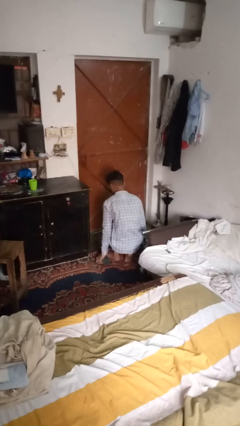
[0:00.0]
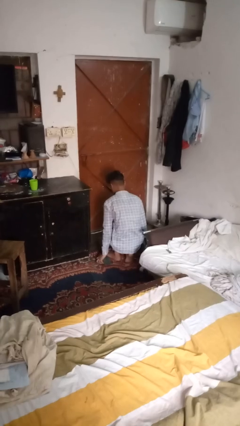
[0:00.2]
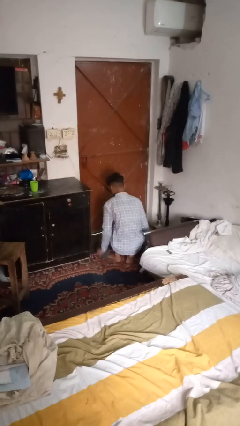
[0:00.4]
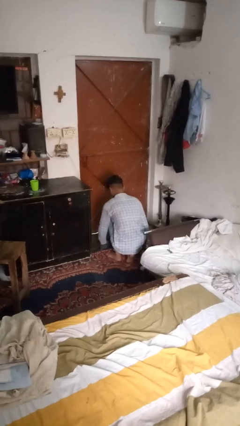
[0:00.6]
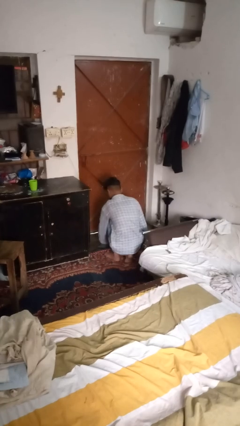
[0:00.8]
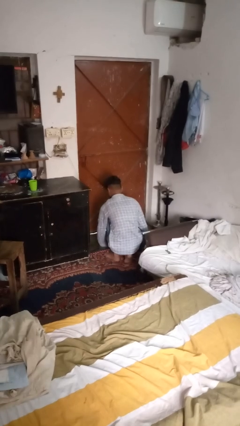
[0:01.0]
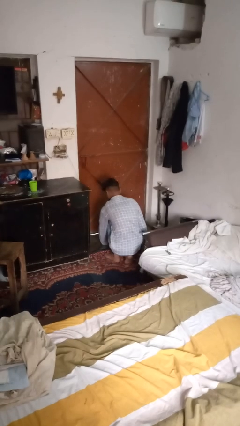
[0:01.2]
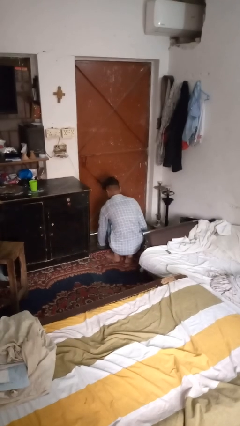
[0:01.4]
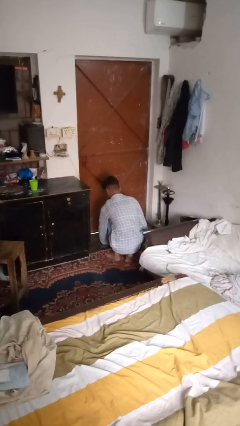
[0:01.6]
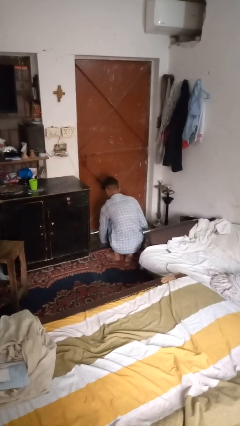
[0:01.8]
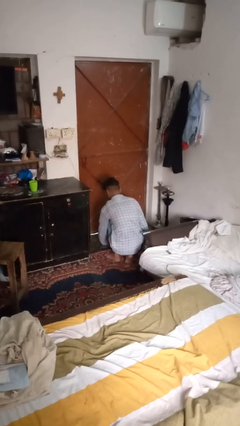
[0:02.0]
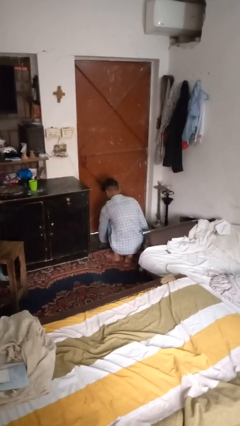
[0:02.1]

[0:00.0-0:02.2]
person mops

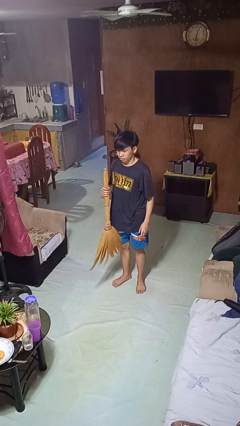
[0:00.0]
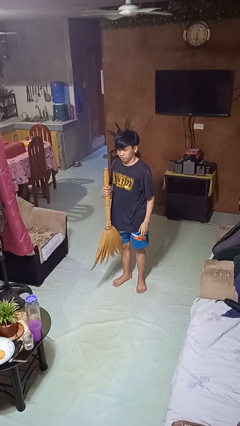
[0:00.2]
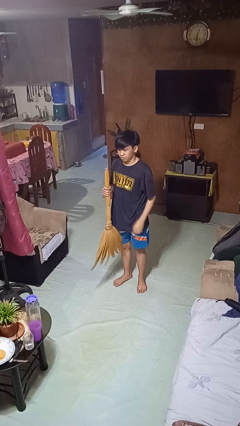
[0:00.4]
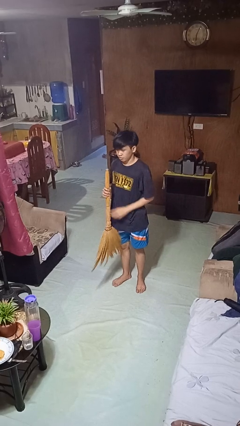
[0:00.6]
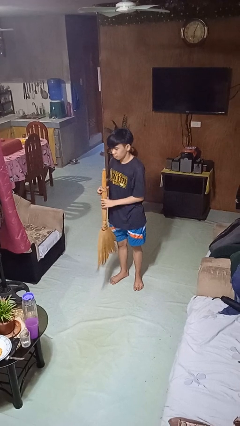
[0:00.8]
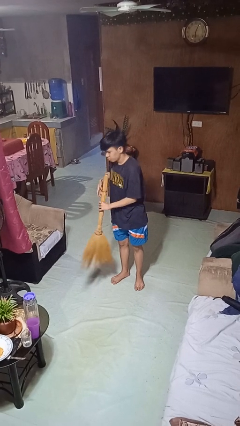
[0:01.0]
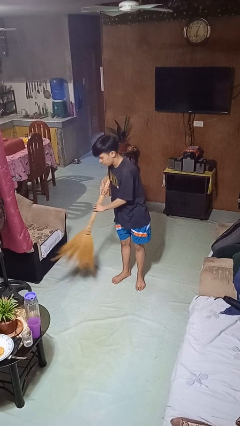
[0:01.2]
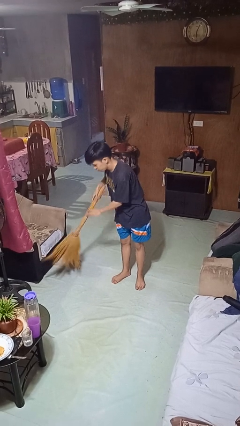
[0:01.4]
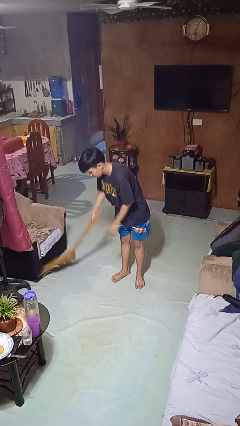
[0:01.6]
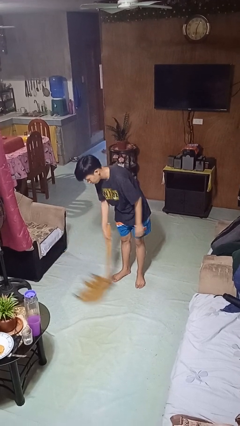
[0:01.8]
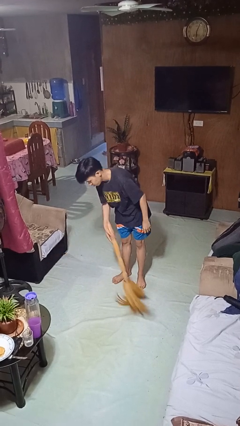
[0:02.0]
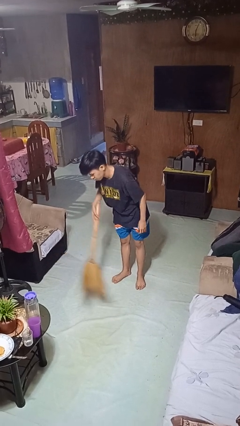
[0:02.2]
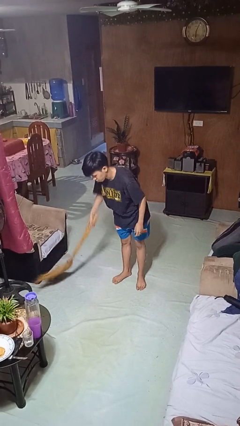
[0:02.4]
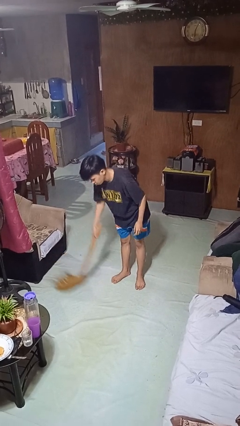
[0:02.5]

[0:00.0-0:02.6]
person sweeps floor

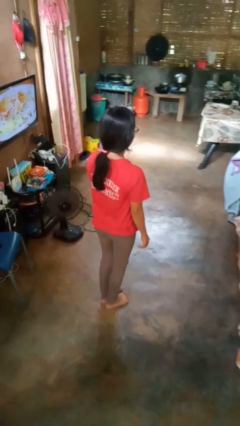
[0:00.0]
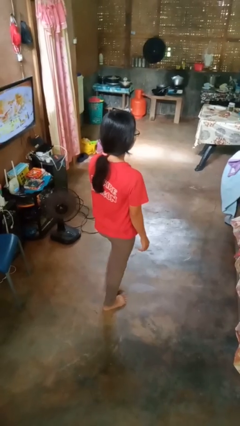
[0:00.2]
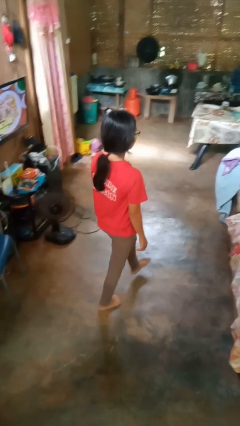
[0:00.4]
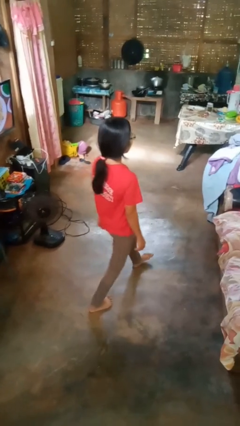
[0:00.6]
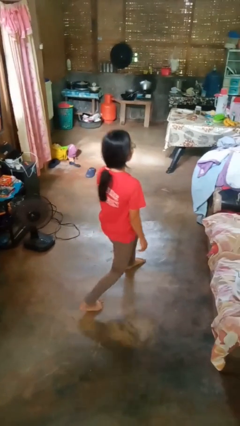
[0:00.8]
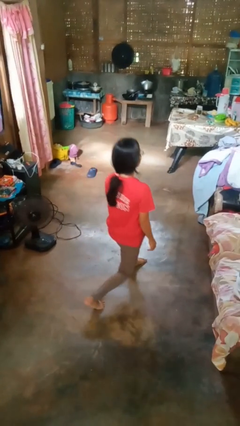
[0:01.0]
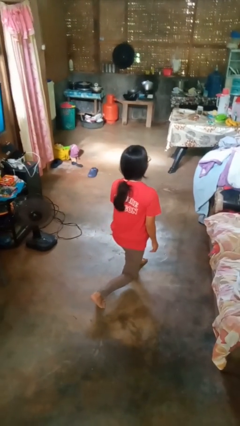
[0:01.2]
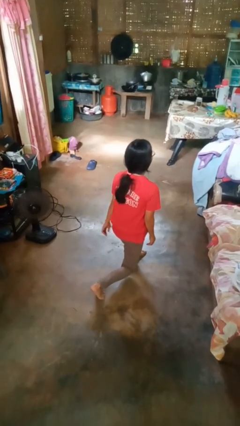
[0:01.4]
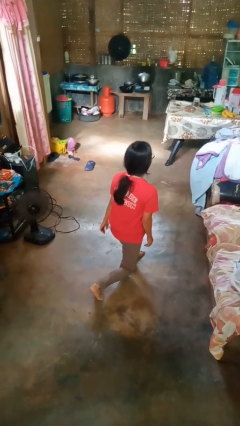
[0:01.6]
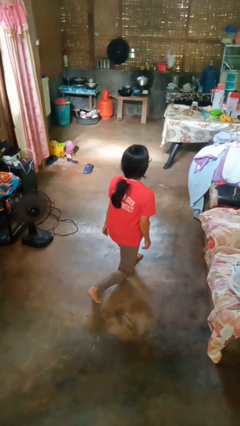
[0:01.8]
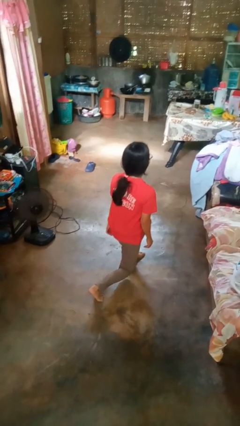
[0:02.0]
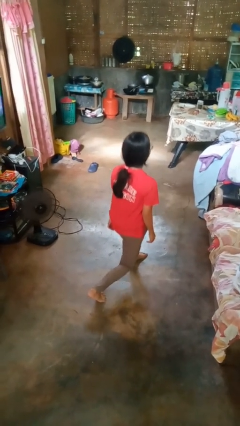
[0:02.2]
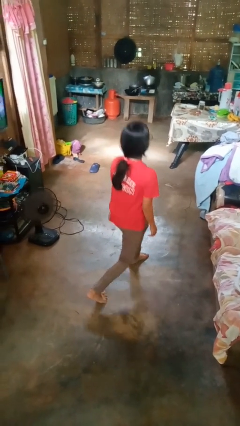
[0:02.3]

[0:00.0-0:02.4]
person exercises with lunges

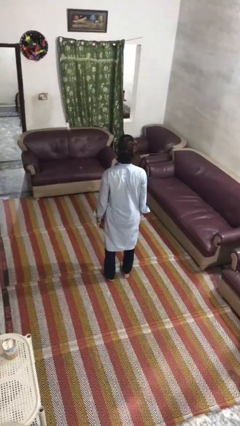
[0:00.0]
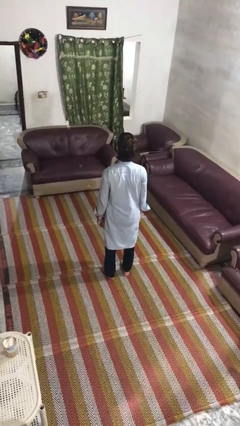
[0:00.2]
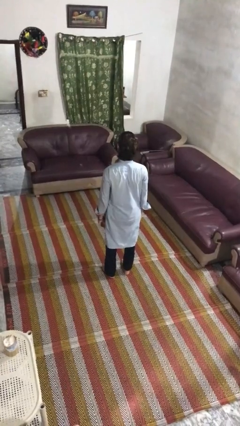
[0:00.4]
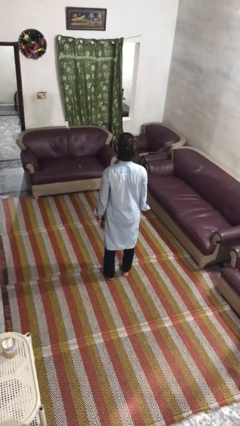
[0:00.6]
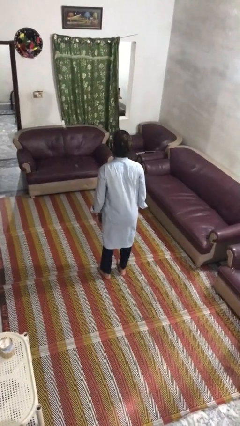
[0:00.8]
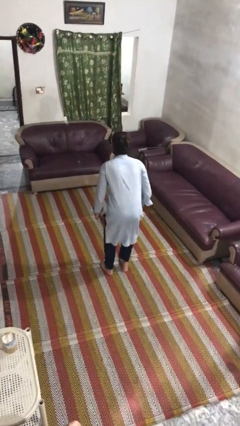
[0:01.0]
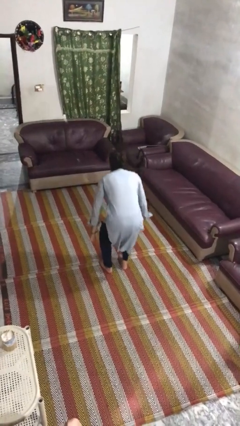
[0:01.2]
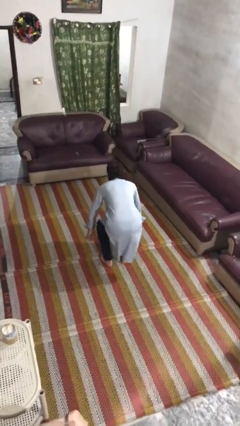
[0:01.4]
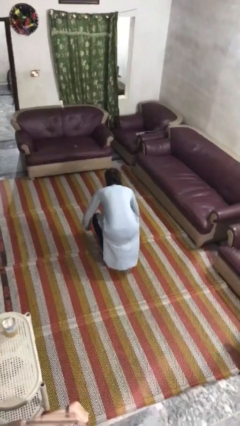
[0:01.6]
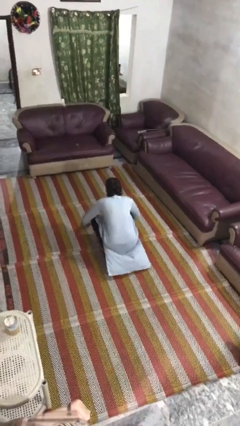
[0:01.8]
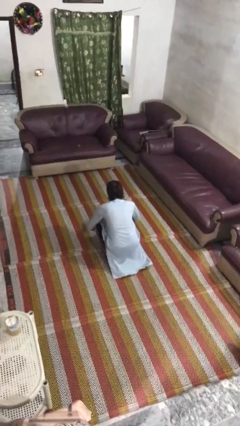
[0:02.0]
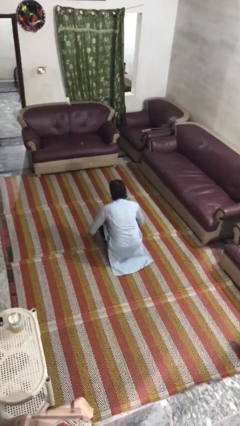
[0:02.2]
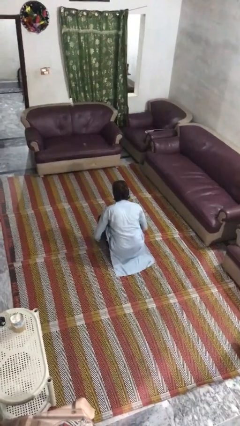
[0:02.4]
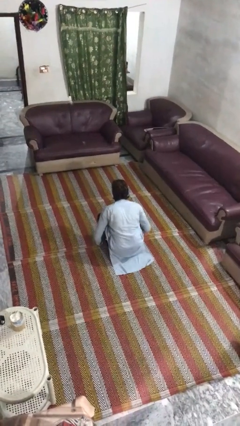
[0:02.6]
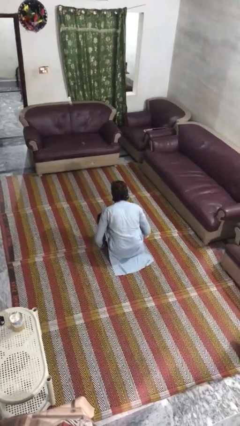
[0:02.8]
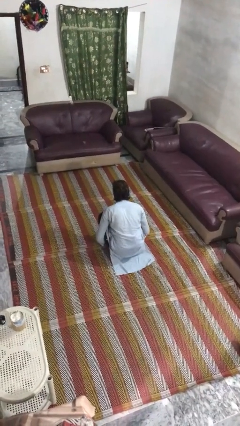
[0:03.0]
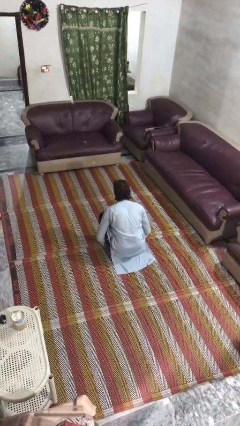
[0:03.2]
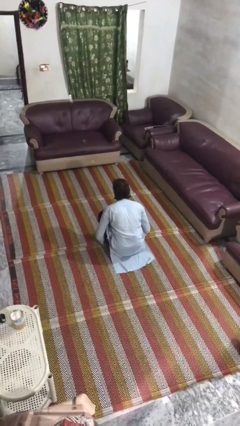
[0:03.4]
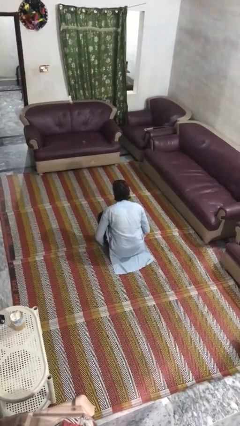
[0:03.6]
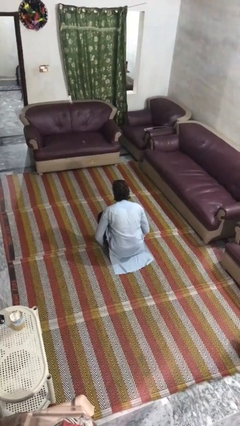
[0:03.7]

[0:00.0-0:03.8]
person squats

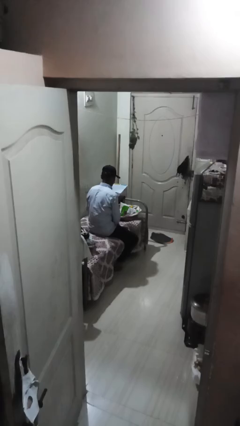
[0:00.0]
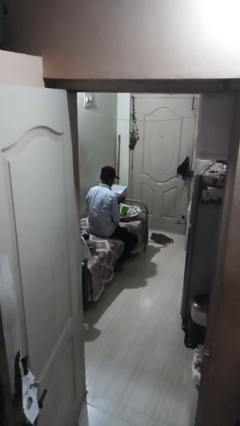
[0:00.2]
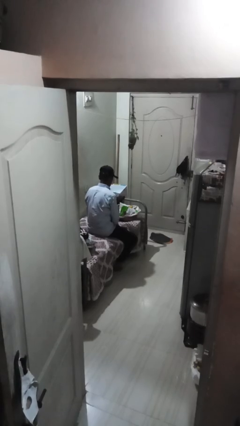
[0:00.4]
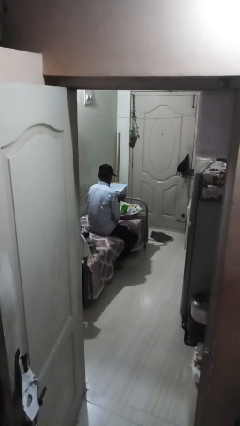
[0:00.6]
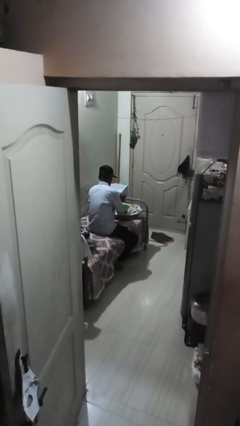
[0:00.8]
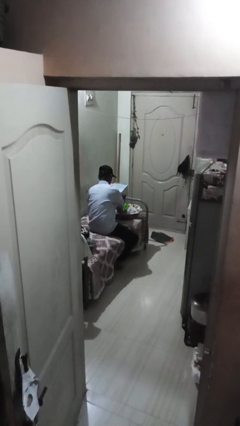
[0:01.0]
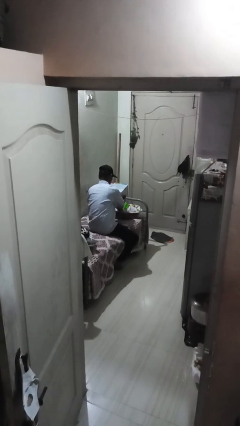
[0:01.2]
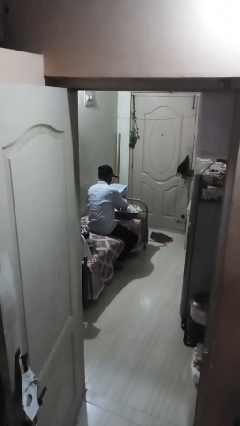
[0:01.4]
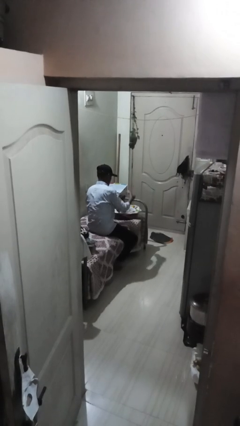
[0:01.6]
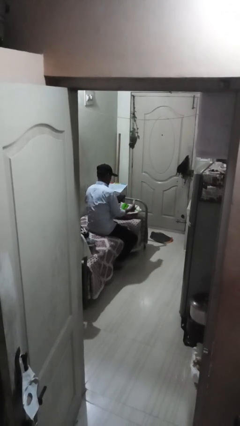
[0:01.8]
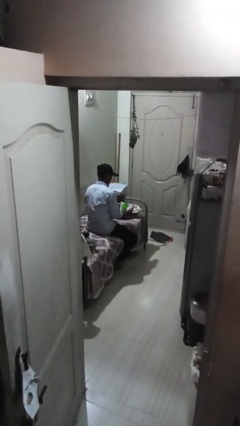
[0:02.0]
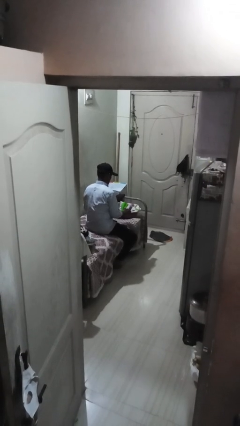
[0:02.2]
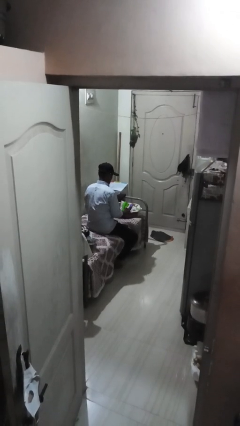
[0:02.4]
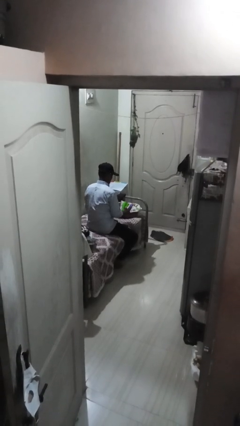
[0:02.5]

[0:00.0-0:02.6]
person takes object from bag

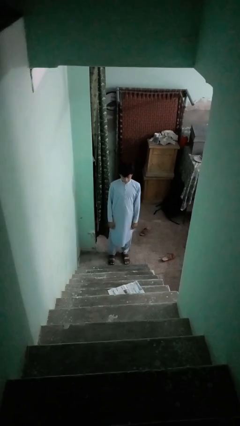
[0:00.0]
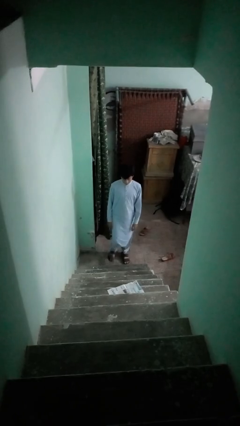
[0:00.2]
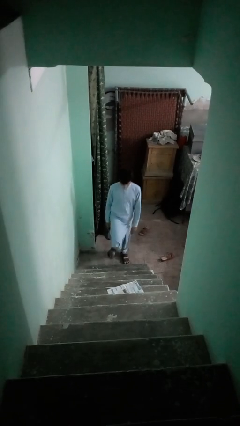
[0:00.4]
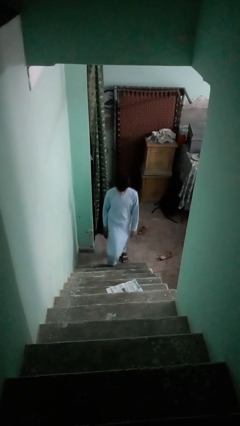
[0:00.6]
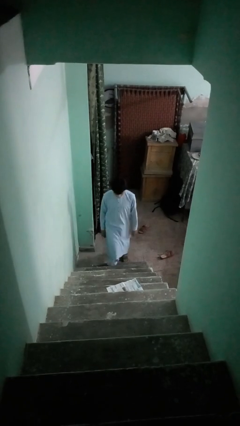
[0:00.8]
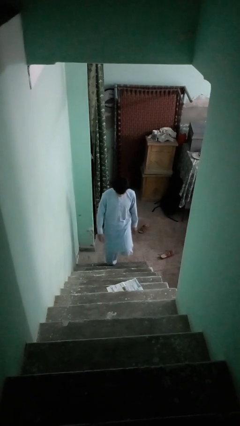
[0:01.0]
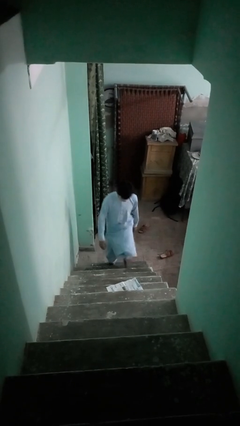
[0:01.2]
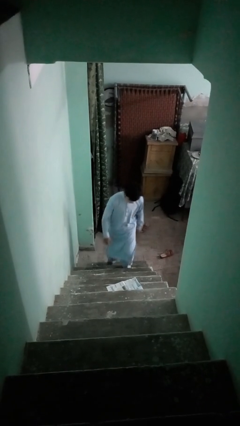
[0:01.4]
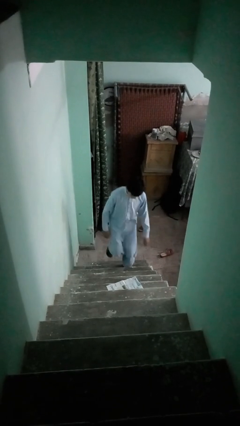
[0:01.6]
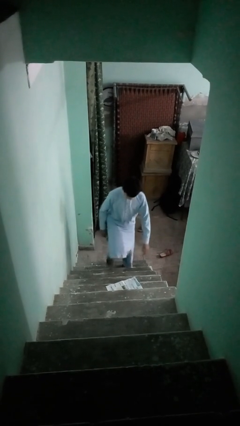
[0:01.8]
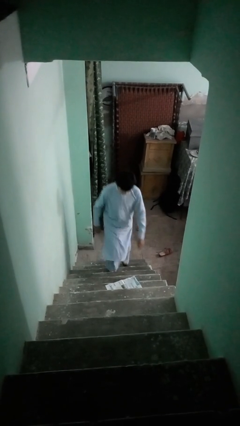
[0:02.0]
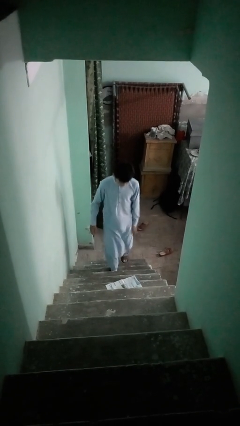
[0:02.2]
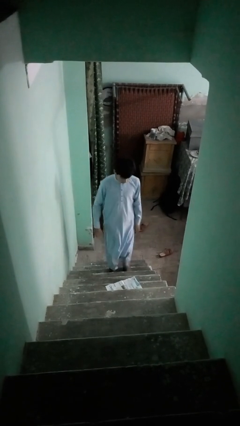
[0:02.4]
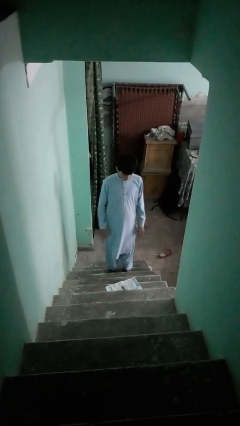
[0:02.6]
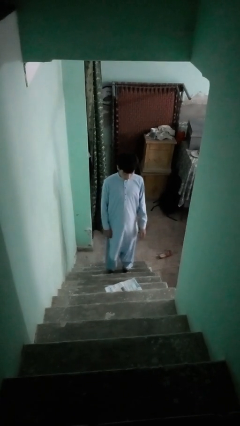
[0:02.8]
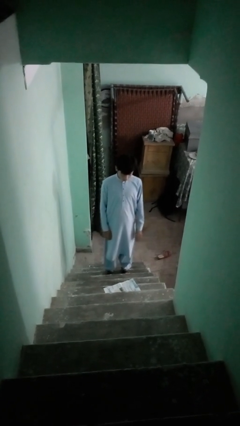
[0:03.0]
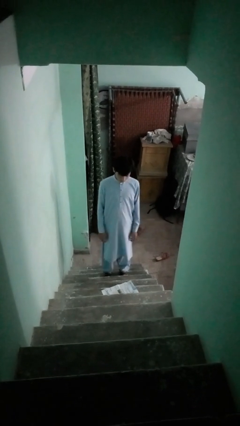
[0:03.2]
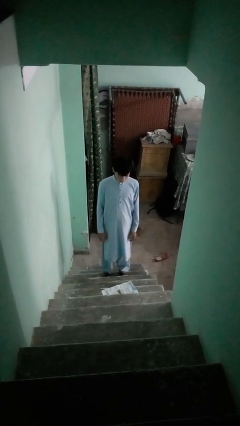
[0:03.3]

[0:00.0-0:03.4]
person climbs up stairs

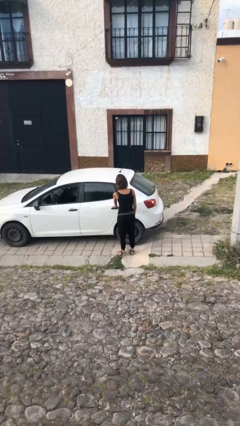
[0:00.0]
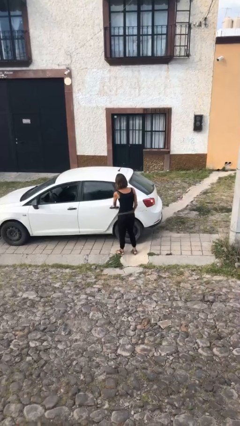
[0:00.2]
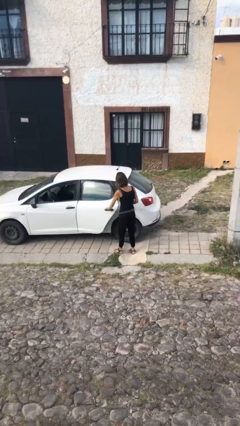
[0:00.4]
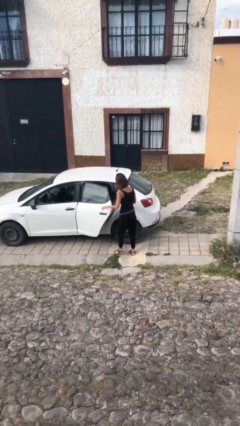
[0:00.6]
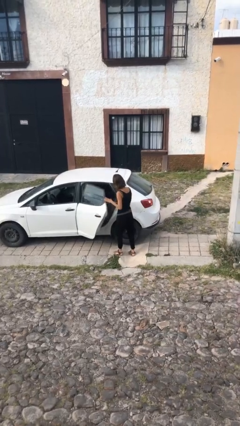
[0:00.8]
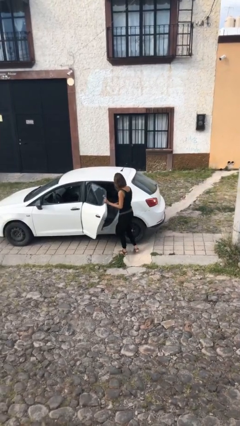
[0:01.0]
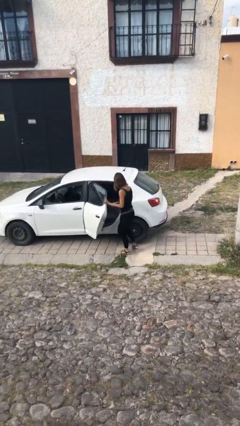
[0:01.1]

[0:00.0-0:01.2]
person opens car door
